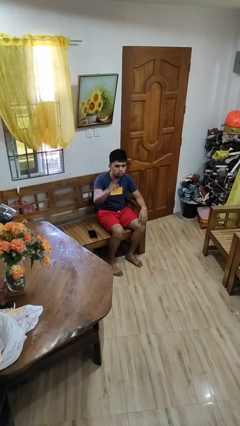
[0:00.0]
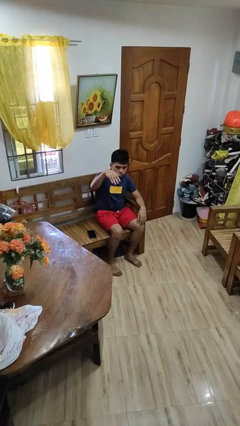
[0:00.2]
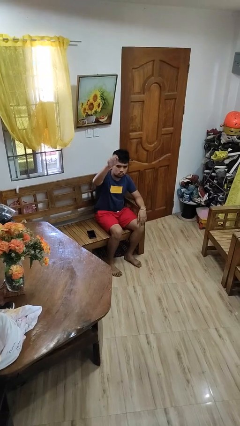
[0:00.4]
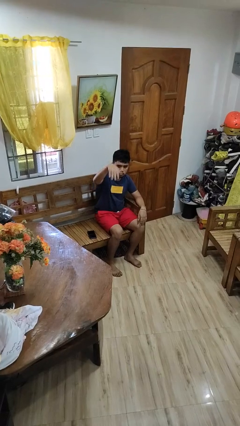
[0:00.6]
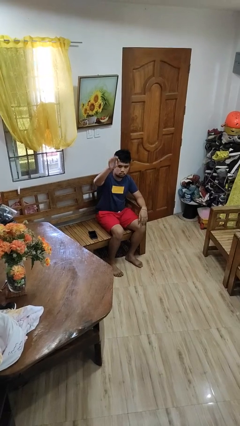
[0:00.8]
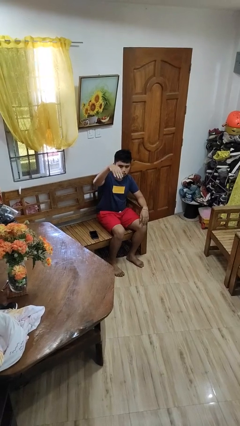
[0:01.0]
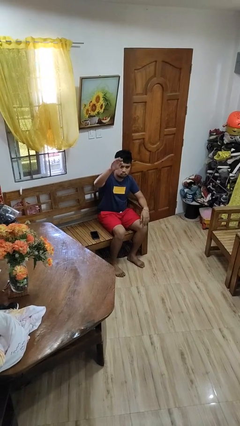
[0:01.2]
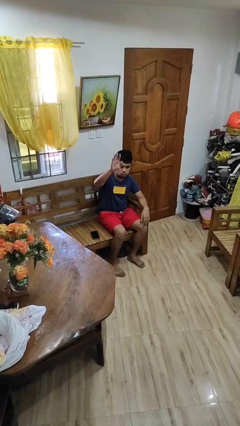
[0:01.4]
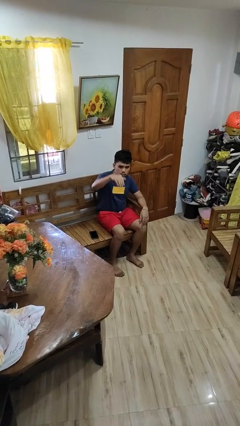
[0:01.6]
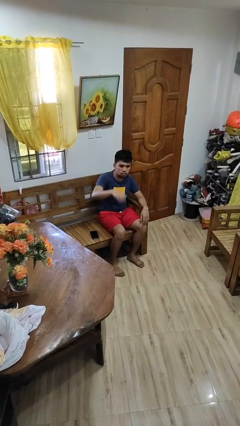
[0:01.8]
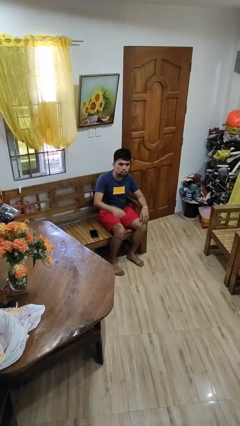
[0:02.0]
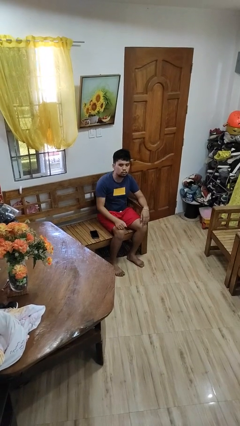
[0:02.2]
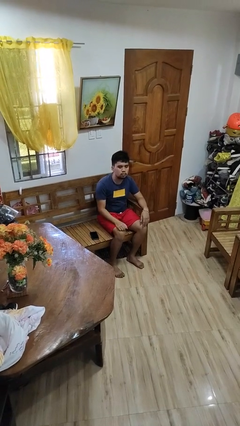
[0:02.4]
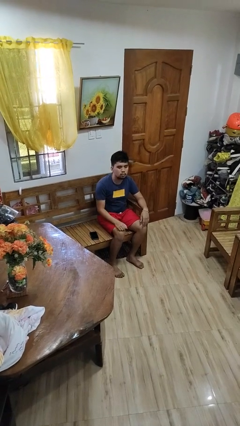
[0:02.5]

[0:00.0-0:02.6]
person gestures come here

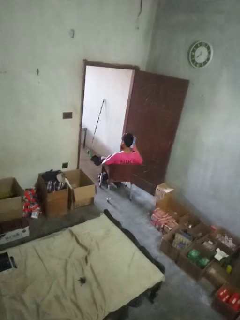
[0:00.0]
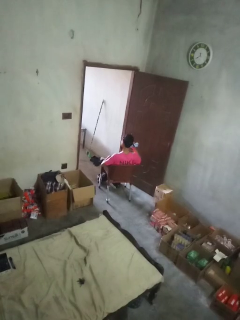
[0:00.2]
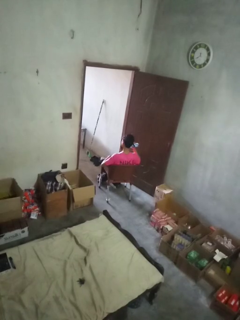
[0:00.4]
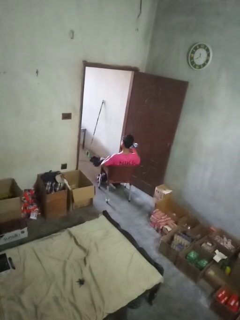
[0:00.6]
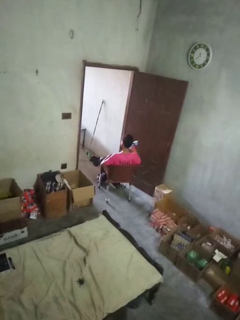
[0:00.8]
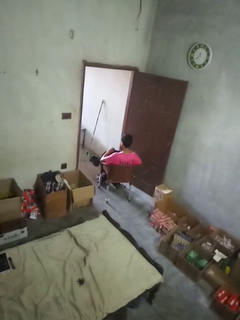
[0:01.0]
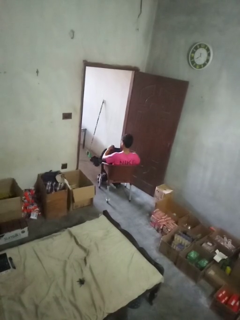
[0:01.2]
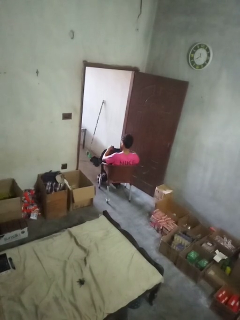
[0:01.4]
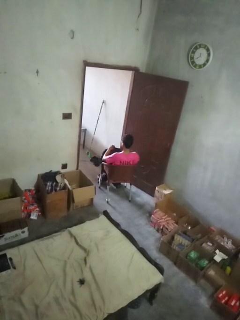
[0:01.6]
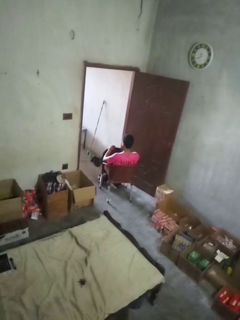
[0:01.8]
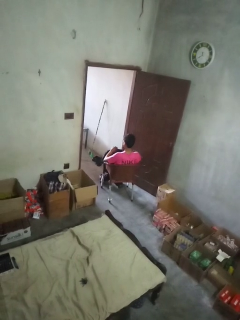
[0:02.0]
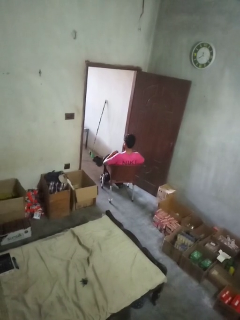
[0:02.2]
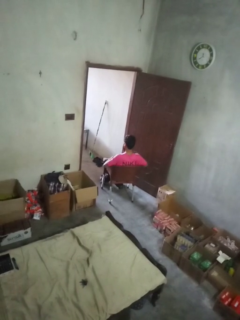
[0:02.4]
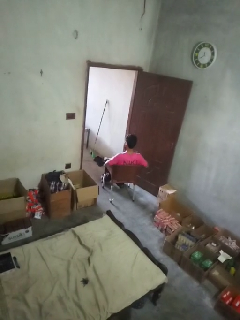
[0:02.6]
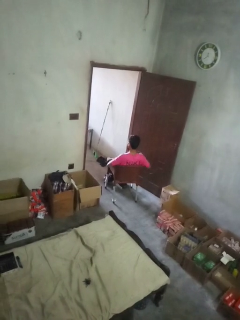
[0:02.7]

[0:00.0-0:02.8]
person puts object into backpack

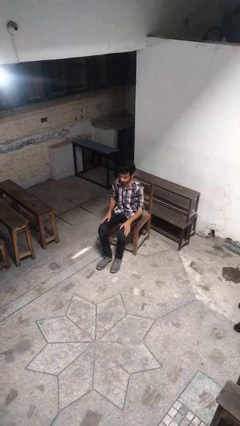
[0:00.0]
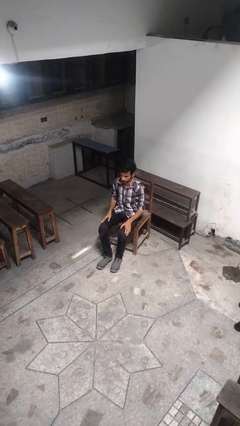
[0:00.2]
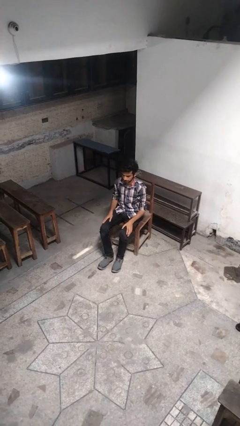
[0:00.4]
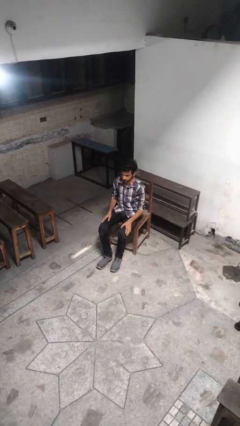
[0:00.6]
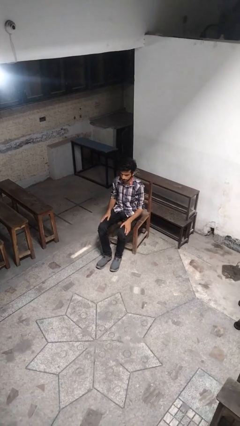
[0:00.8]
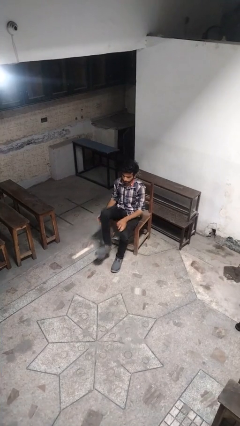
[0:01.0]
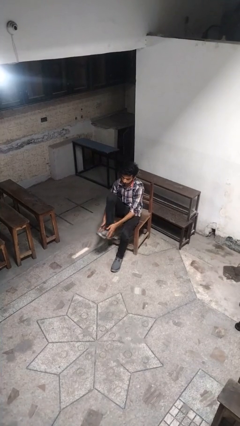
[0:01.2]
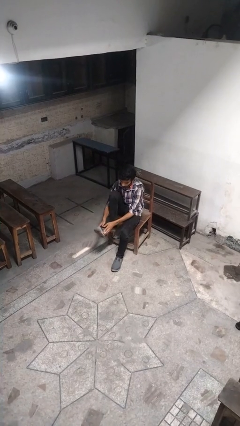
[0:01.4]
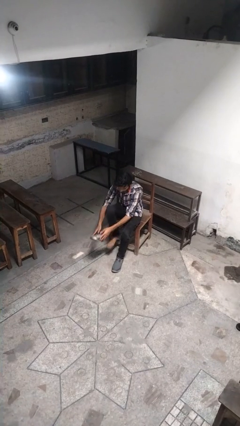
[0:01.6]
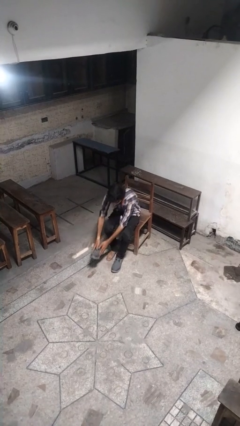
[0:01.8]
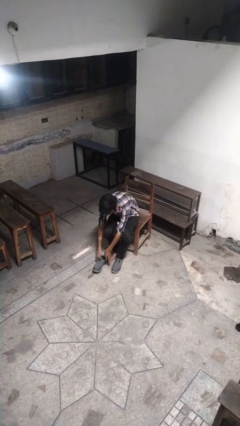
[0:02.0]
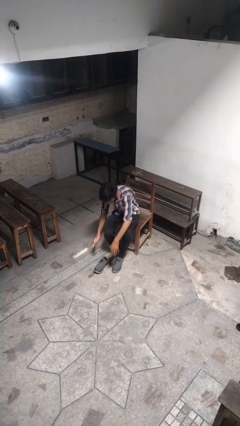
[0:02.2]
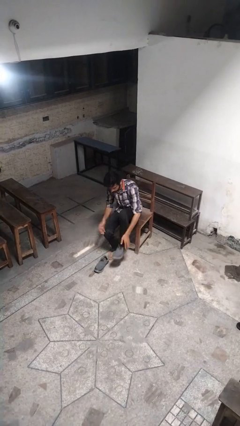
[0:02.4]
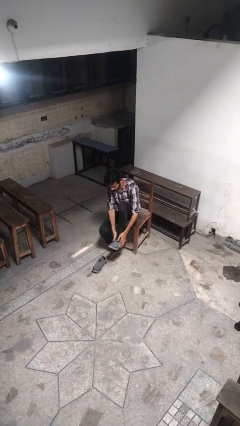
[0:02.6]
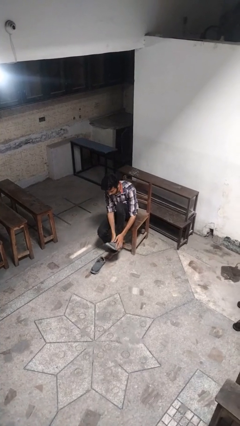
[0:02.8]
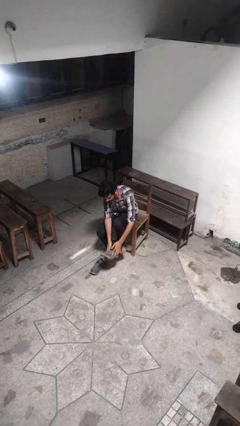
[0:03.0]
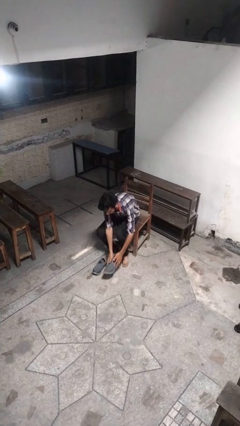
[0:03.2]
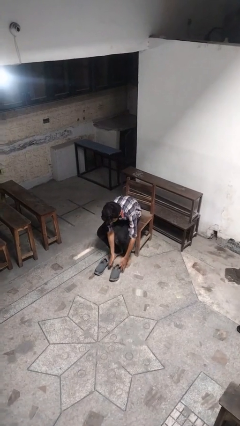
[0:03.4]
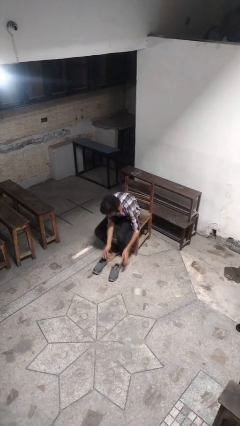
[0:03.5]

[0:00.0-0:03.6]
person takes off shoes

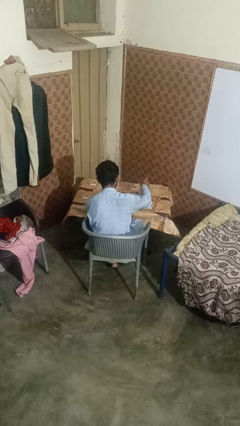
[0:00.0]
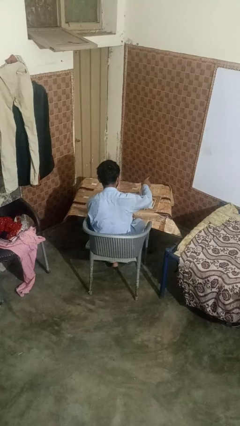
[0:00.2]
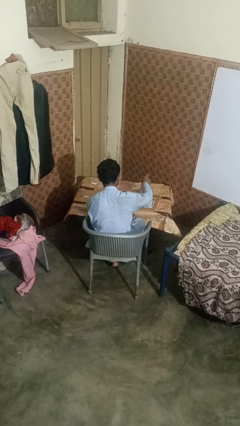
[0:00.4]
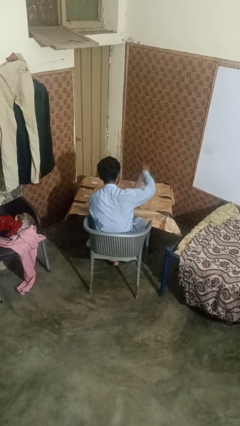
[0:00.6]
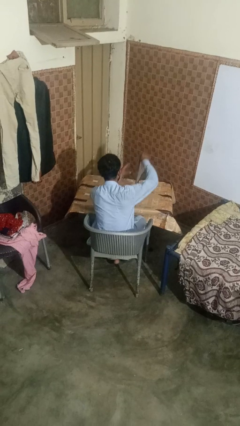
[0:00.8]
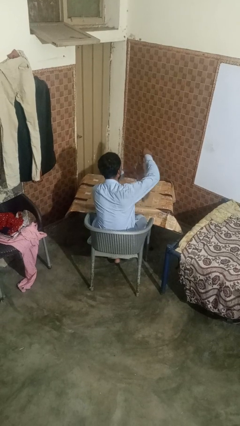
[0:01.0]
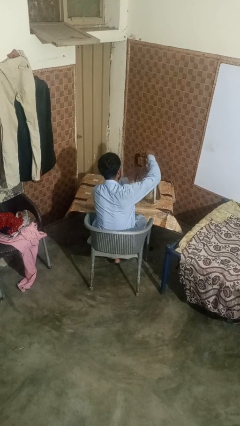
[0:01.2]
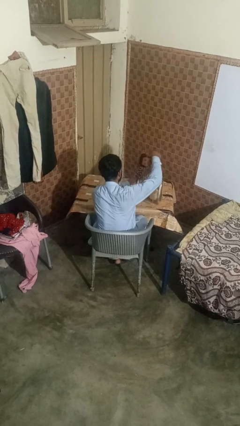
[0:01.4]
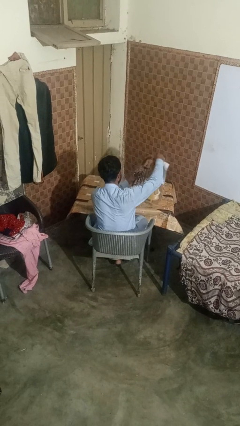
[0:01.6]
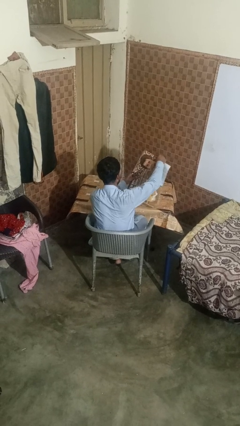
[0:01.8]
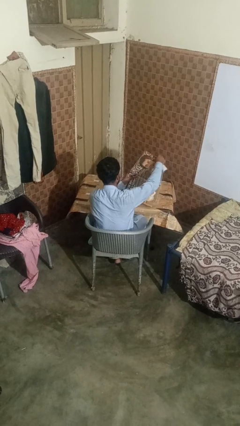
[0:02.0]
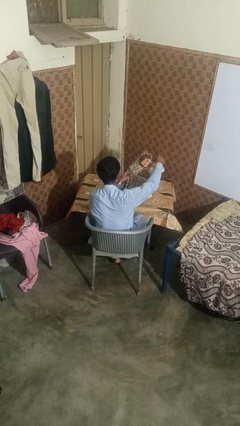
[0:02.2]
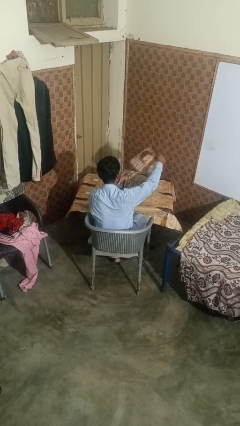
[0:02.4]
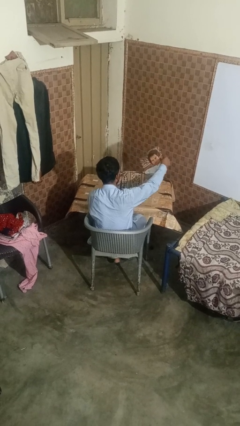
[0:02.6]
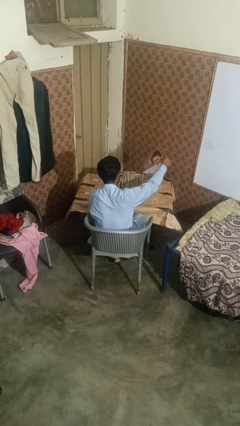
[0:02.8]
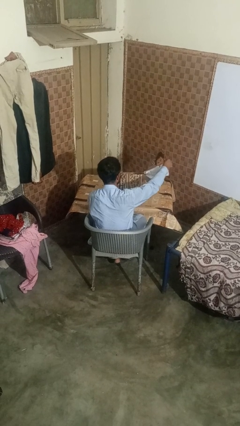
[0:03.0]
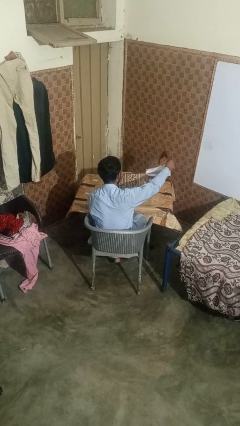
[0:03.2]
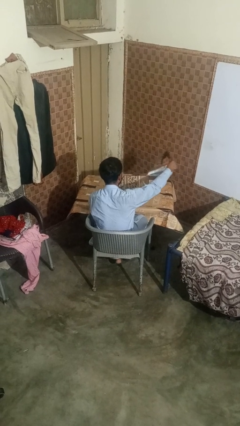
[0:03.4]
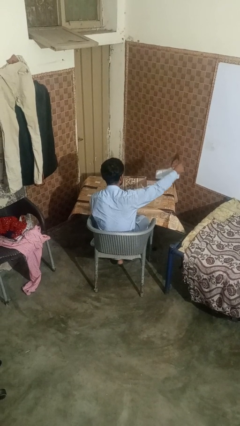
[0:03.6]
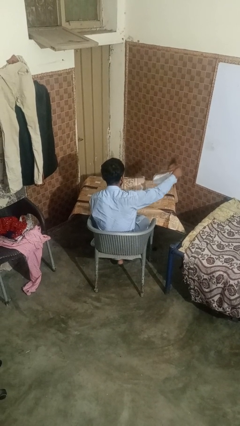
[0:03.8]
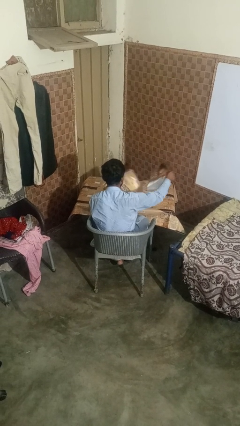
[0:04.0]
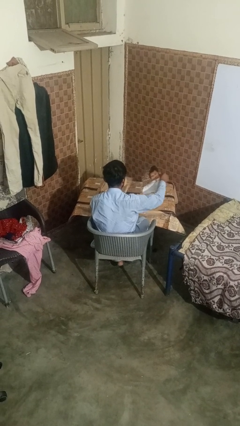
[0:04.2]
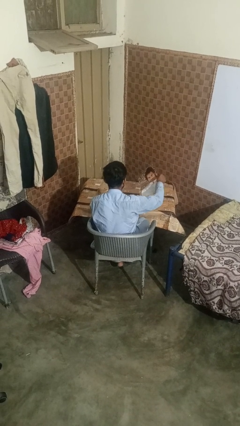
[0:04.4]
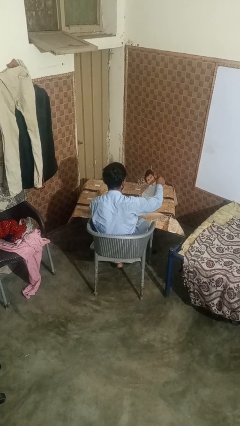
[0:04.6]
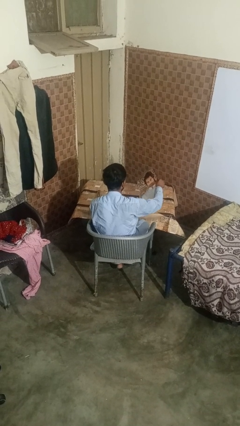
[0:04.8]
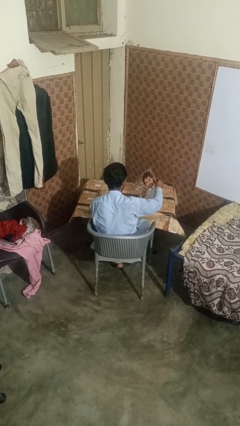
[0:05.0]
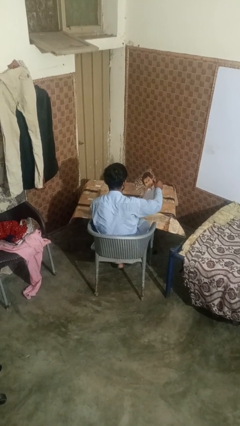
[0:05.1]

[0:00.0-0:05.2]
person tears paper

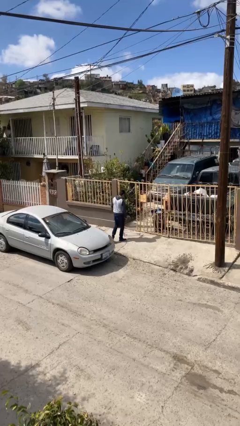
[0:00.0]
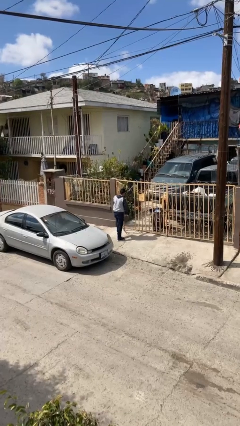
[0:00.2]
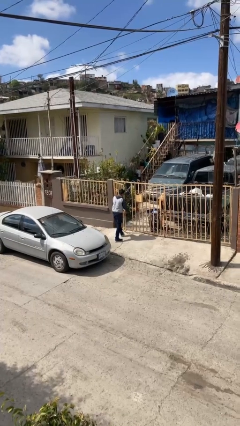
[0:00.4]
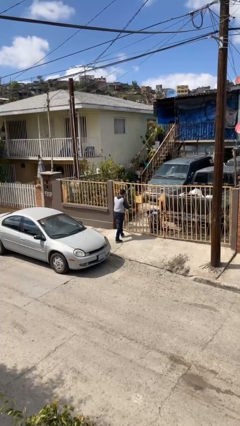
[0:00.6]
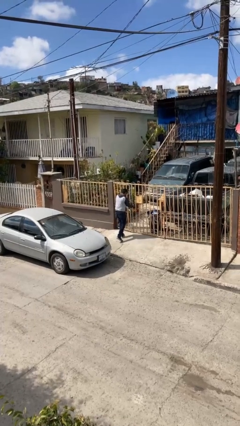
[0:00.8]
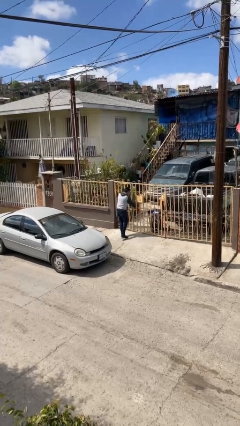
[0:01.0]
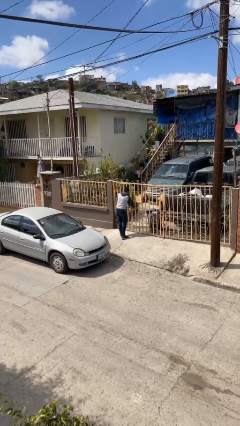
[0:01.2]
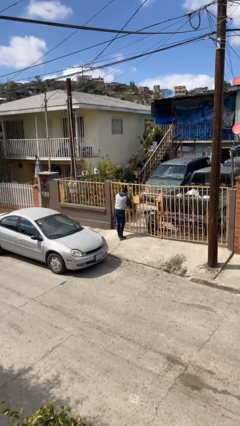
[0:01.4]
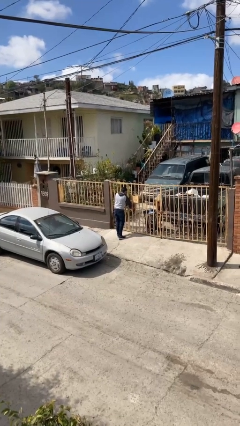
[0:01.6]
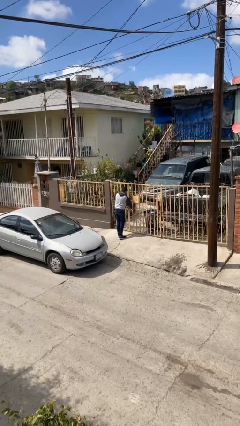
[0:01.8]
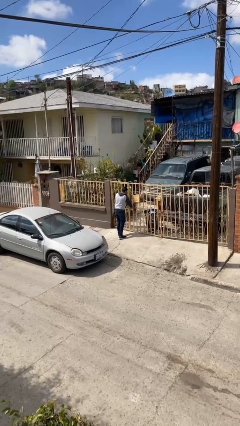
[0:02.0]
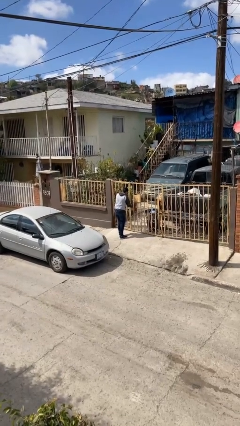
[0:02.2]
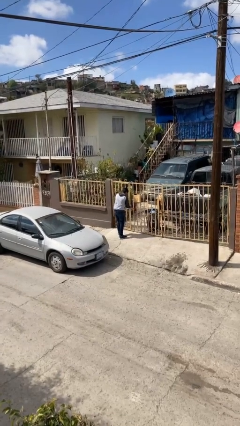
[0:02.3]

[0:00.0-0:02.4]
person closes facility door

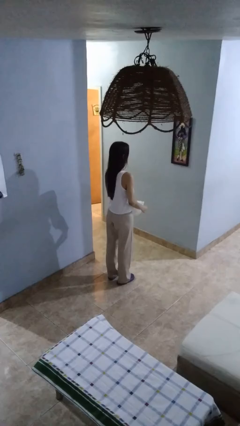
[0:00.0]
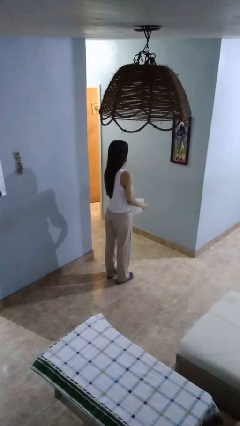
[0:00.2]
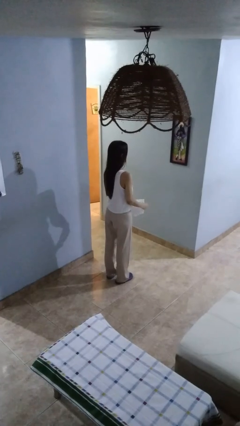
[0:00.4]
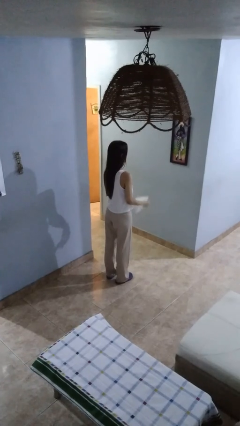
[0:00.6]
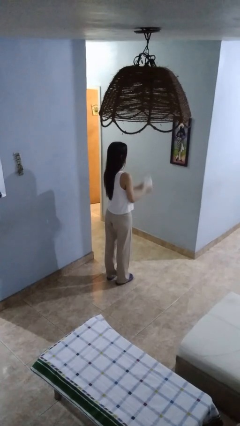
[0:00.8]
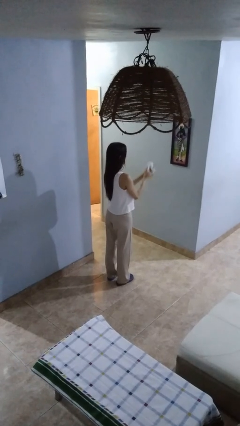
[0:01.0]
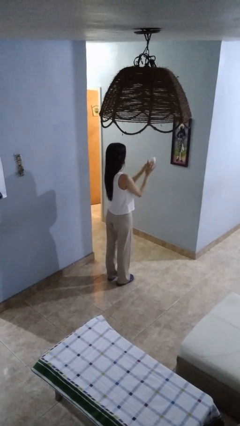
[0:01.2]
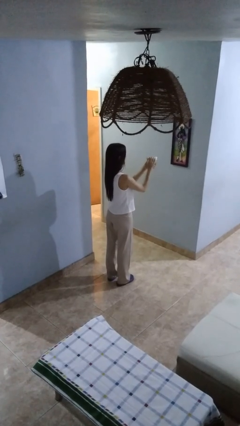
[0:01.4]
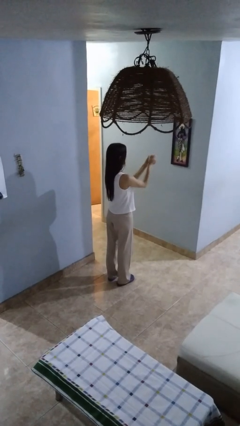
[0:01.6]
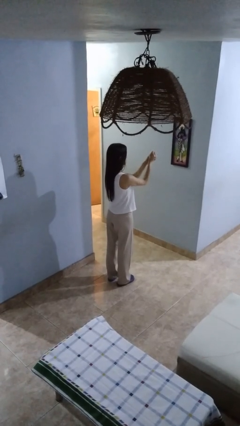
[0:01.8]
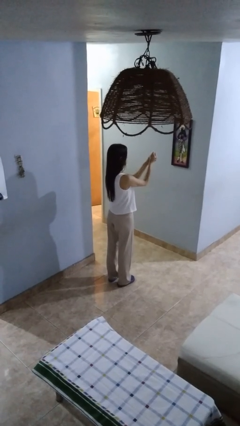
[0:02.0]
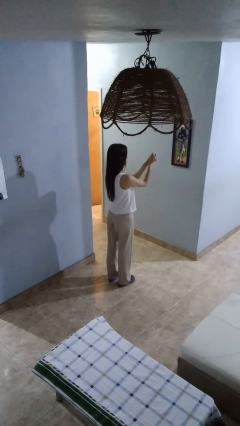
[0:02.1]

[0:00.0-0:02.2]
person crumples paper
